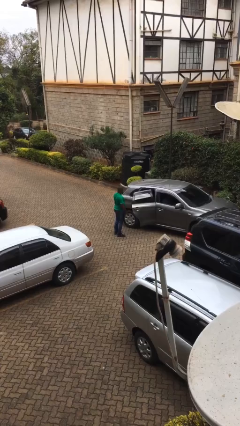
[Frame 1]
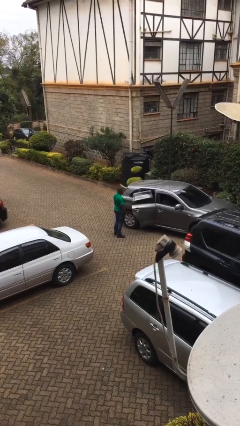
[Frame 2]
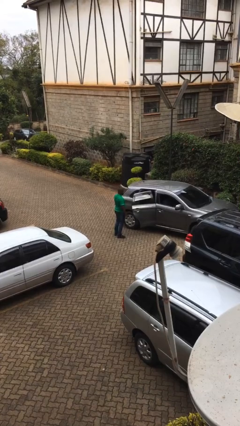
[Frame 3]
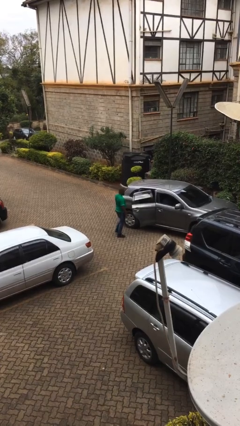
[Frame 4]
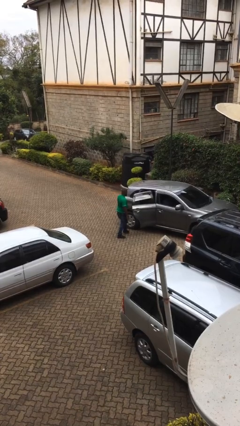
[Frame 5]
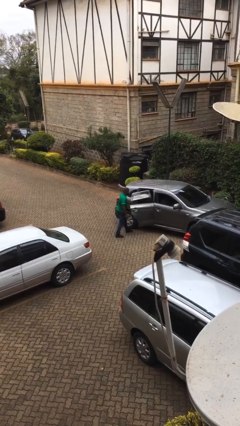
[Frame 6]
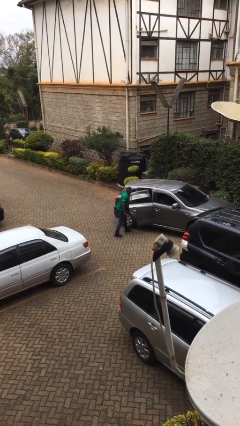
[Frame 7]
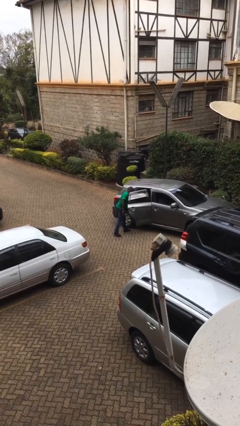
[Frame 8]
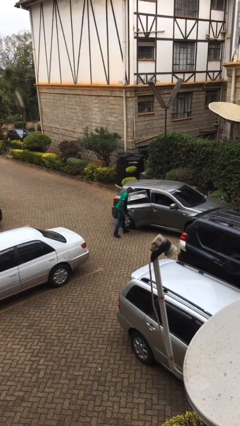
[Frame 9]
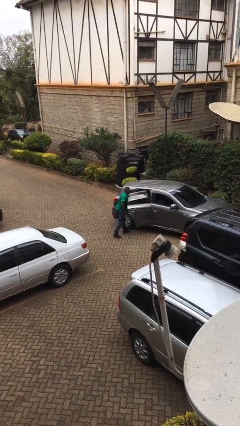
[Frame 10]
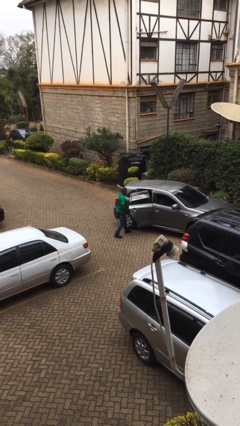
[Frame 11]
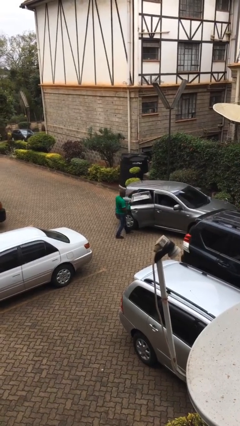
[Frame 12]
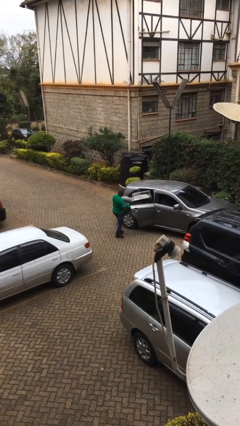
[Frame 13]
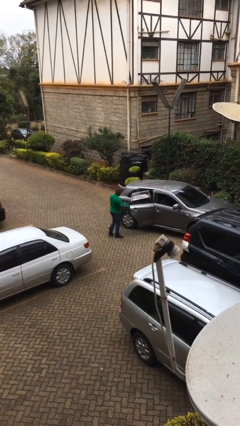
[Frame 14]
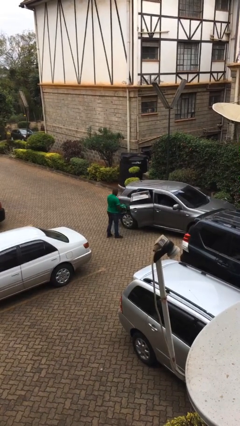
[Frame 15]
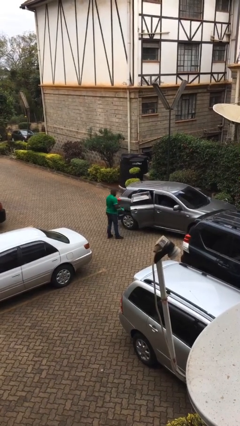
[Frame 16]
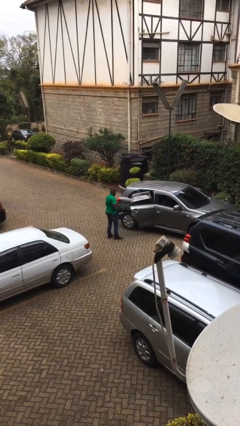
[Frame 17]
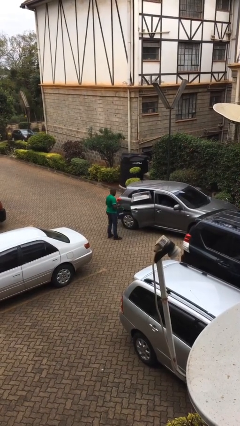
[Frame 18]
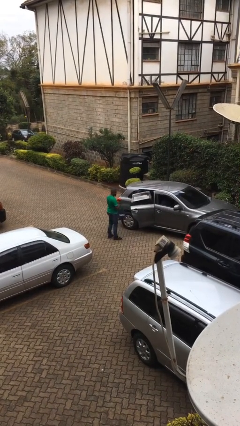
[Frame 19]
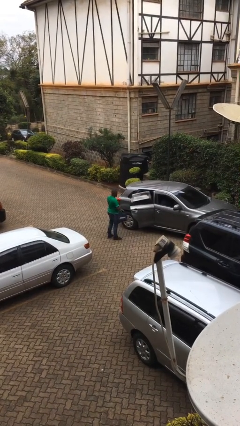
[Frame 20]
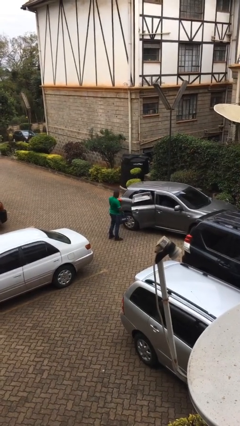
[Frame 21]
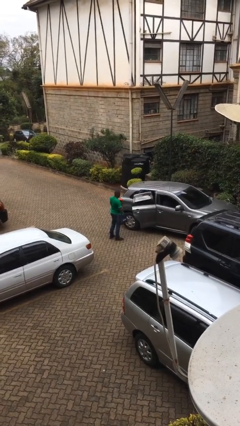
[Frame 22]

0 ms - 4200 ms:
person unloads car

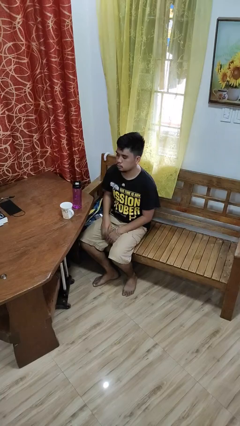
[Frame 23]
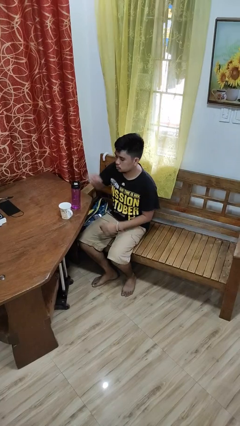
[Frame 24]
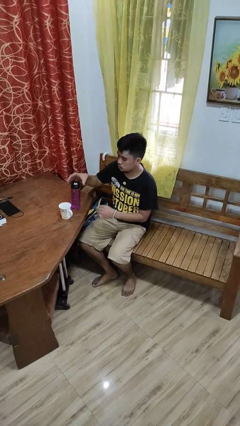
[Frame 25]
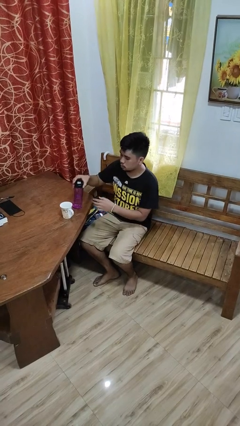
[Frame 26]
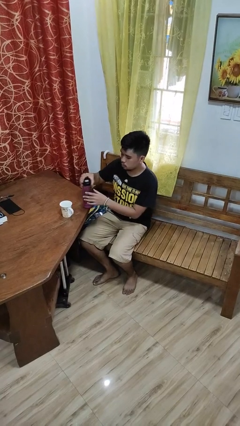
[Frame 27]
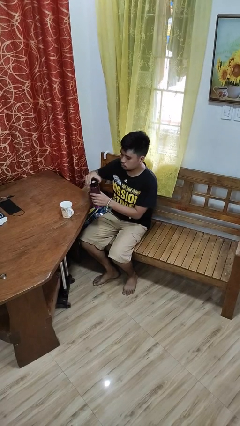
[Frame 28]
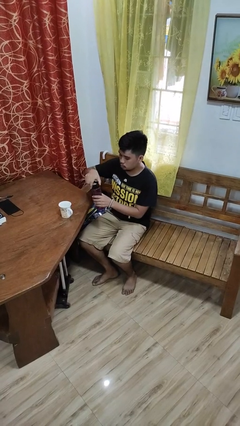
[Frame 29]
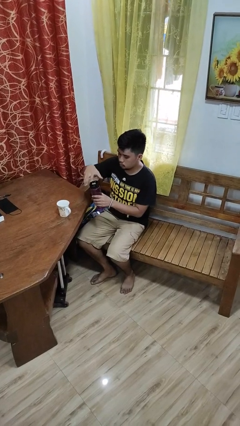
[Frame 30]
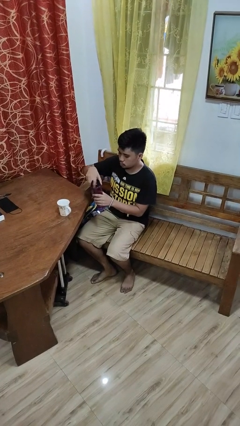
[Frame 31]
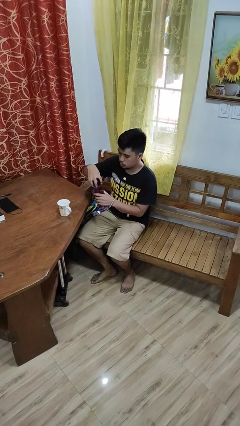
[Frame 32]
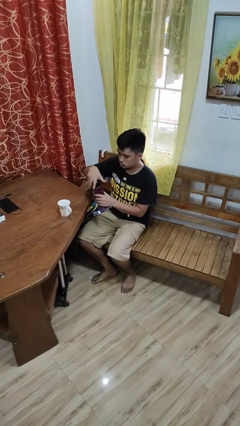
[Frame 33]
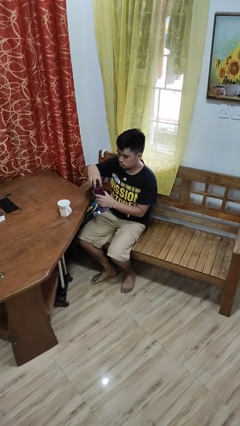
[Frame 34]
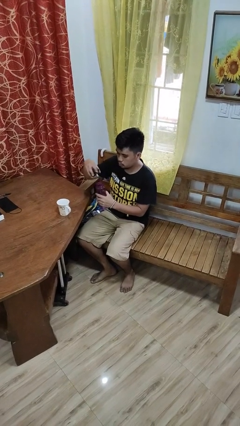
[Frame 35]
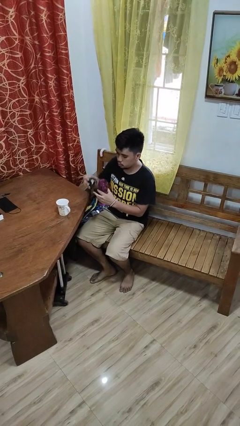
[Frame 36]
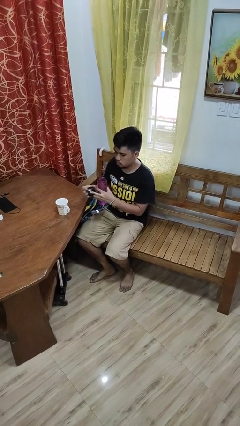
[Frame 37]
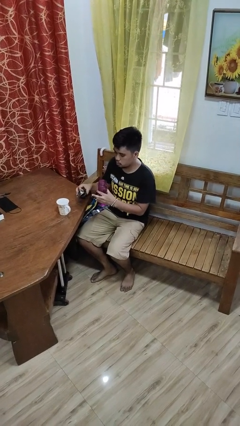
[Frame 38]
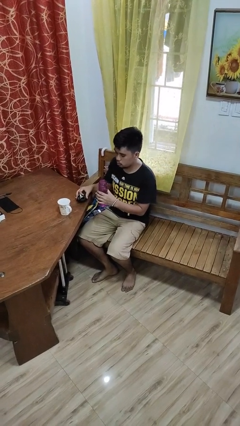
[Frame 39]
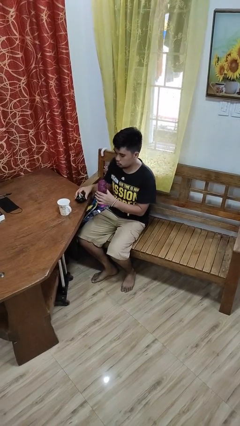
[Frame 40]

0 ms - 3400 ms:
person unscrews lid from bottle

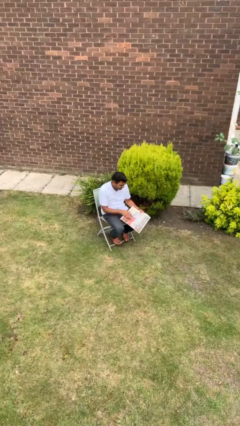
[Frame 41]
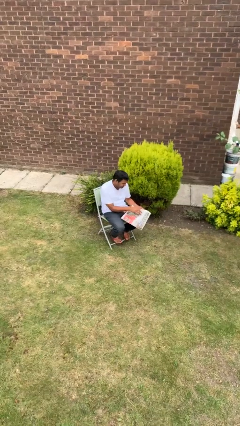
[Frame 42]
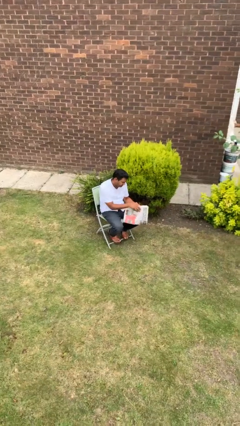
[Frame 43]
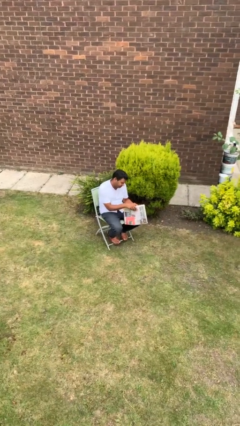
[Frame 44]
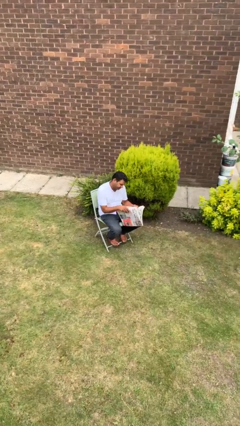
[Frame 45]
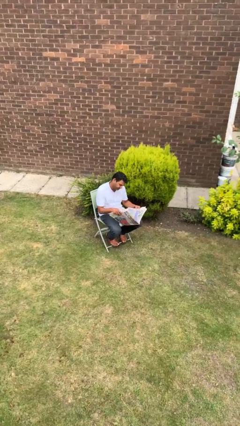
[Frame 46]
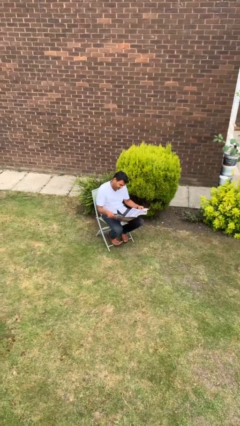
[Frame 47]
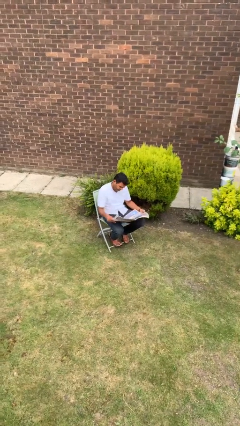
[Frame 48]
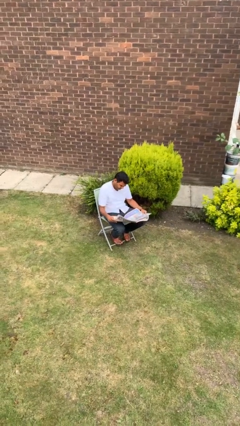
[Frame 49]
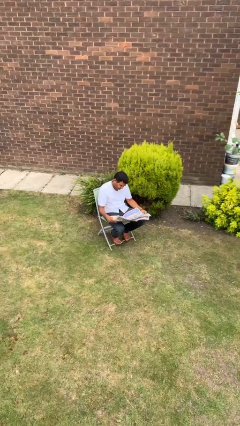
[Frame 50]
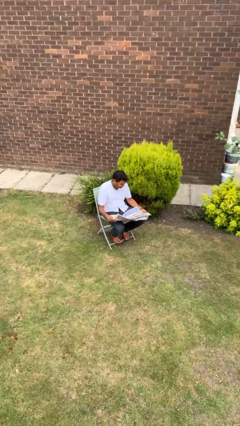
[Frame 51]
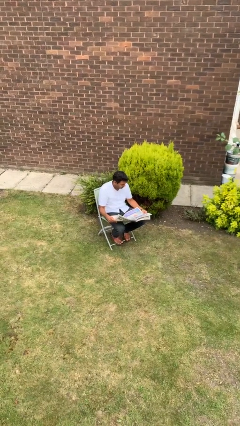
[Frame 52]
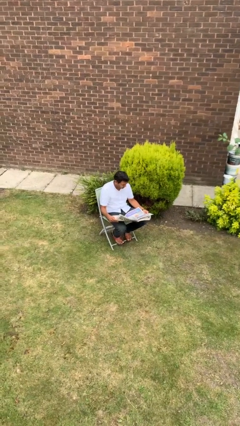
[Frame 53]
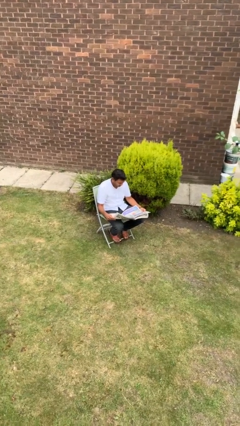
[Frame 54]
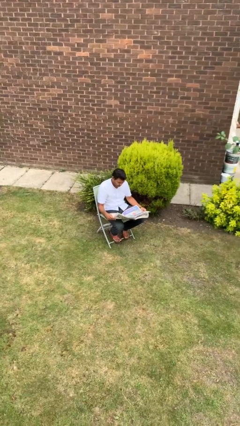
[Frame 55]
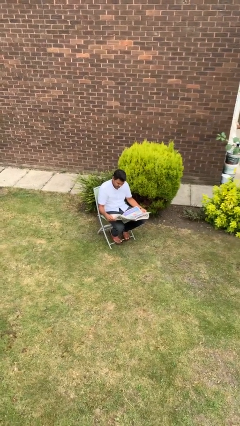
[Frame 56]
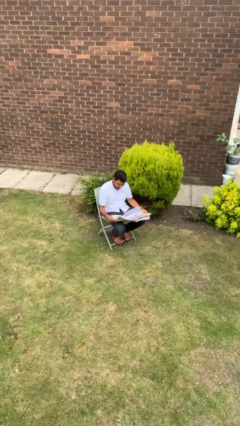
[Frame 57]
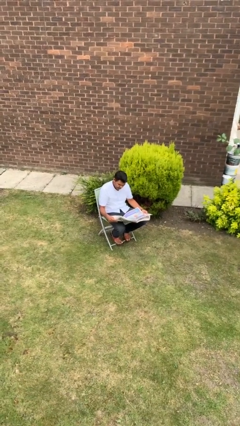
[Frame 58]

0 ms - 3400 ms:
person reads newspaper

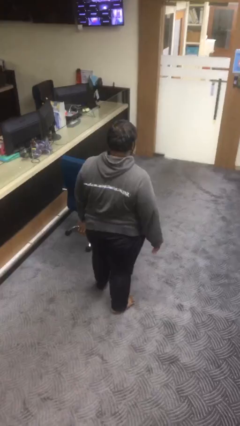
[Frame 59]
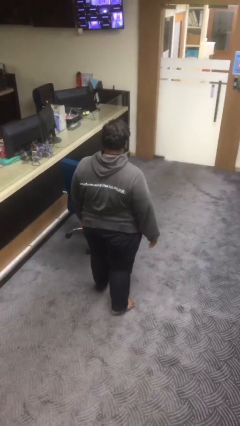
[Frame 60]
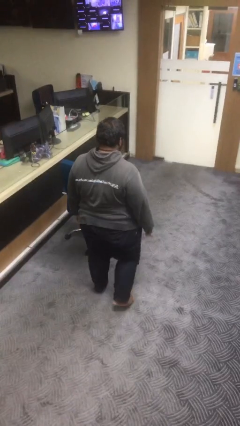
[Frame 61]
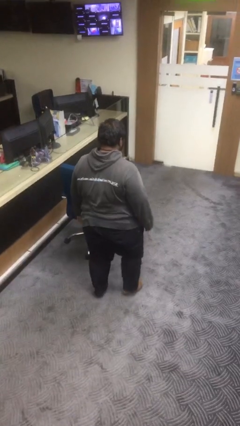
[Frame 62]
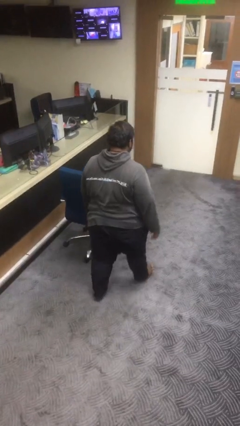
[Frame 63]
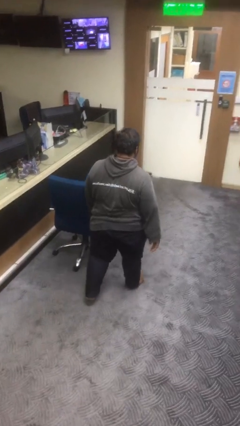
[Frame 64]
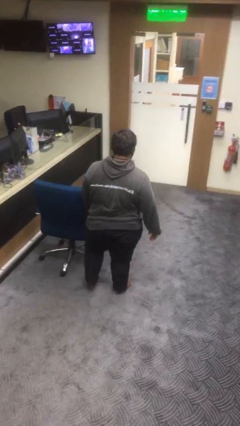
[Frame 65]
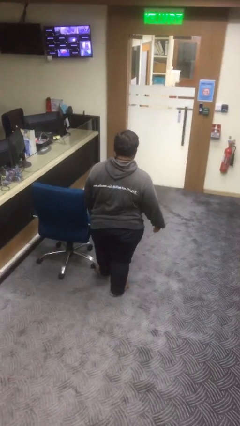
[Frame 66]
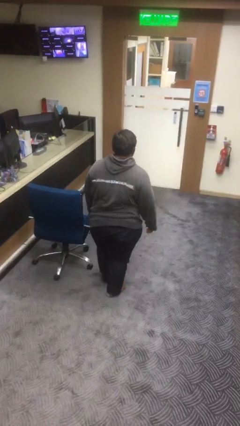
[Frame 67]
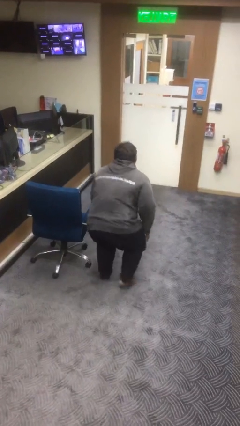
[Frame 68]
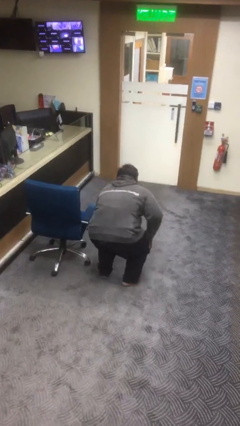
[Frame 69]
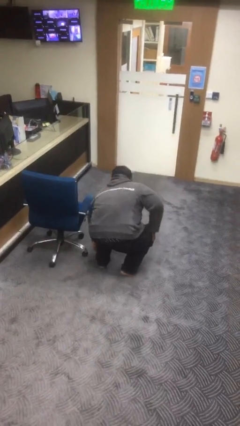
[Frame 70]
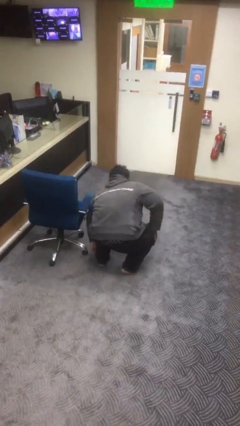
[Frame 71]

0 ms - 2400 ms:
person stubs toe

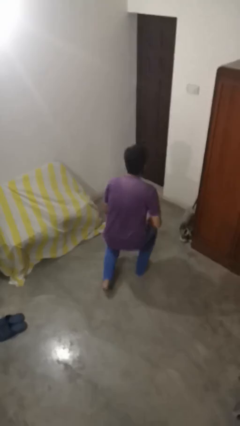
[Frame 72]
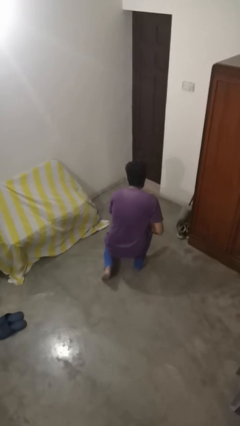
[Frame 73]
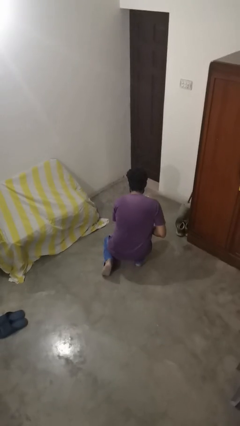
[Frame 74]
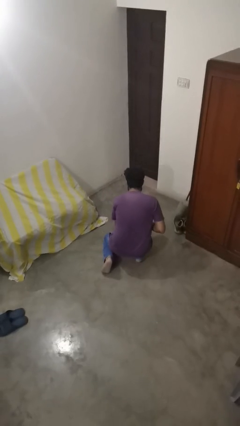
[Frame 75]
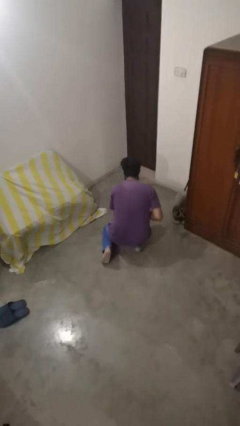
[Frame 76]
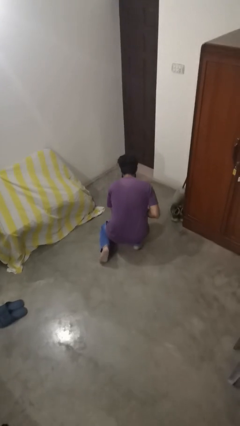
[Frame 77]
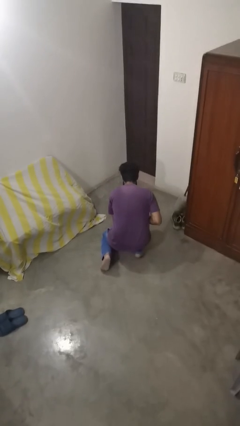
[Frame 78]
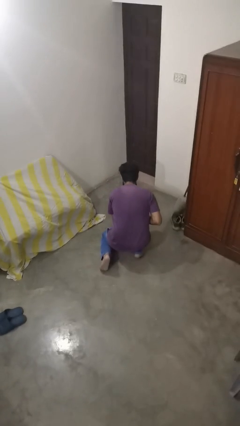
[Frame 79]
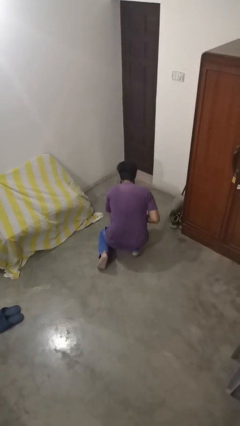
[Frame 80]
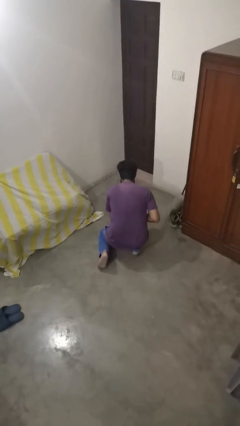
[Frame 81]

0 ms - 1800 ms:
person kneels

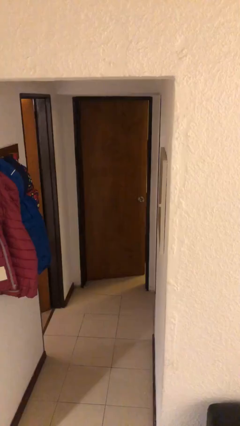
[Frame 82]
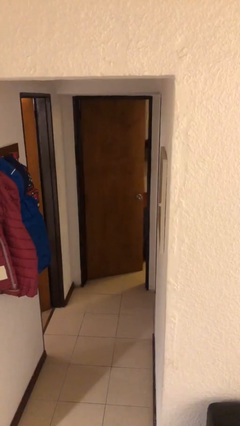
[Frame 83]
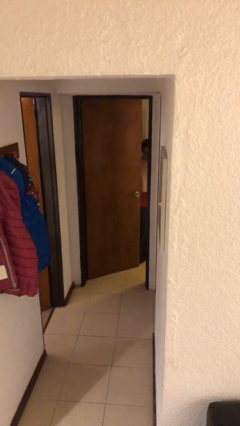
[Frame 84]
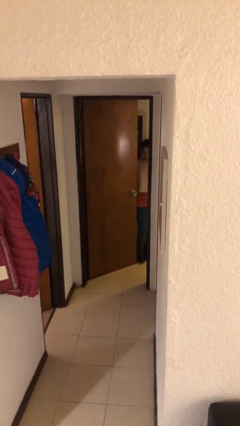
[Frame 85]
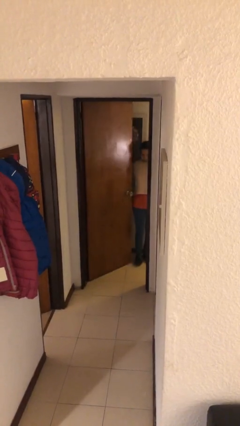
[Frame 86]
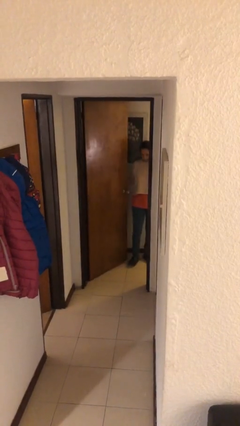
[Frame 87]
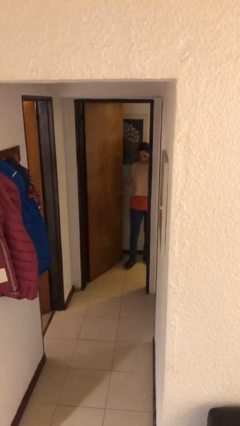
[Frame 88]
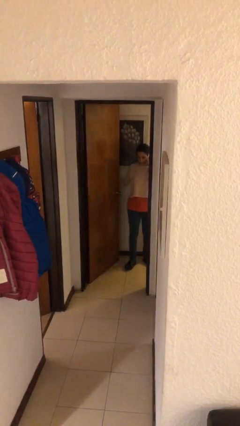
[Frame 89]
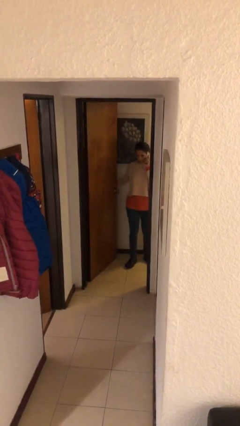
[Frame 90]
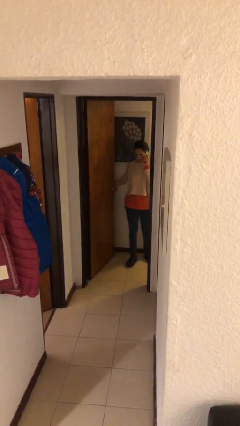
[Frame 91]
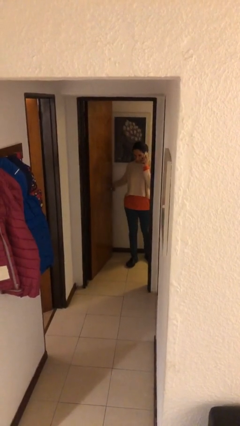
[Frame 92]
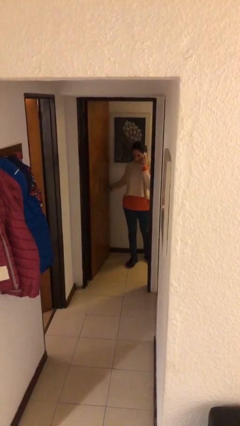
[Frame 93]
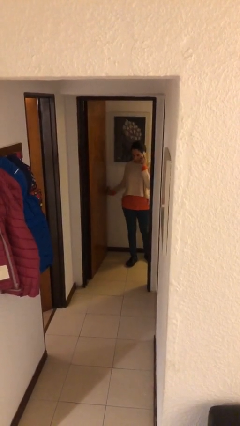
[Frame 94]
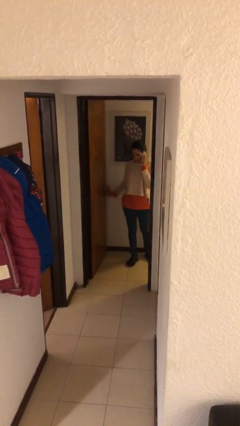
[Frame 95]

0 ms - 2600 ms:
person opens facility door
